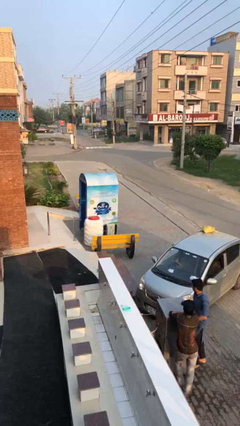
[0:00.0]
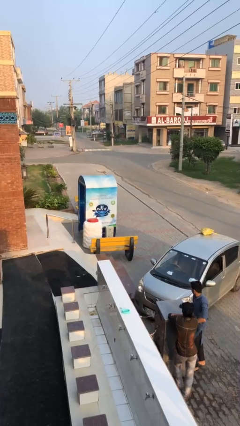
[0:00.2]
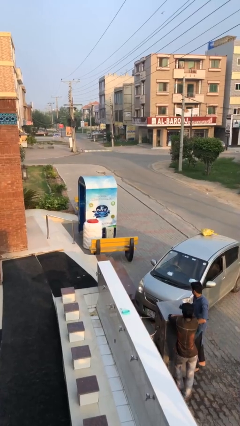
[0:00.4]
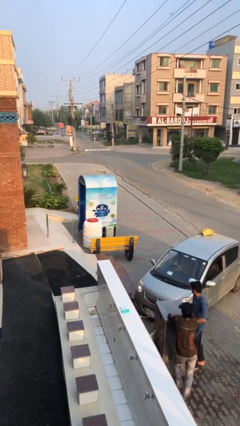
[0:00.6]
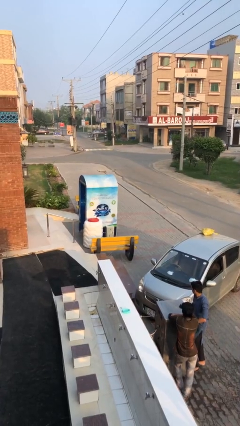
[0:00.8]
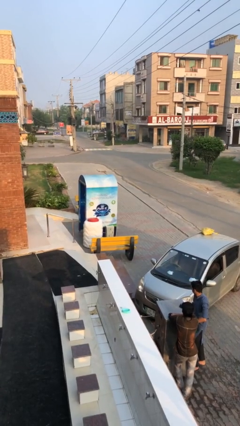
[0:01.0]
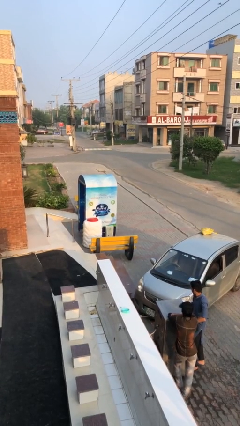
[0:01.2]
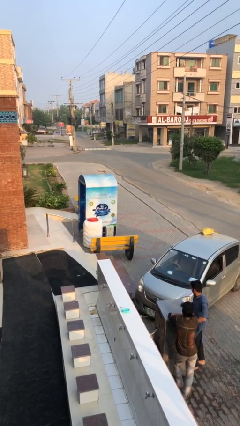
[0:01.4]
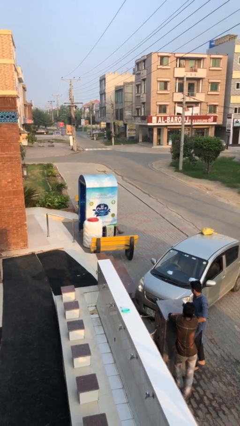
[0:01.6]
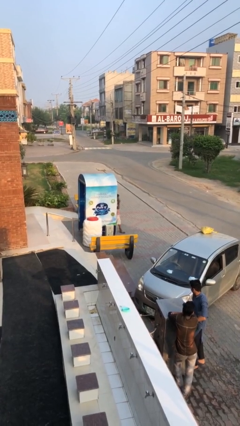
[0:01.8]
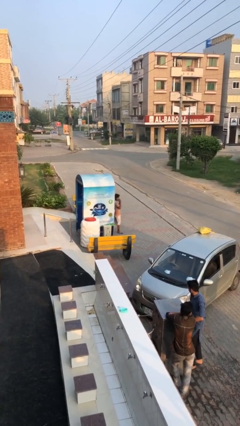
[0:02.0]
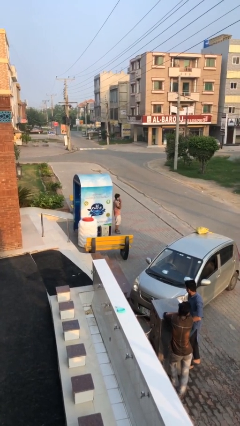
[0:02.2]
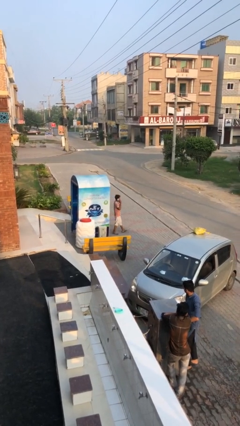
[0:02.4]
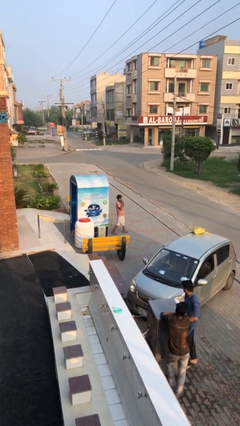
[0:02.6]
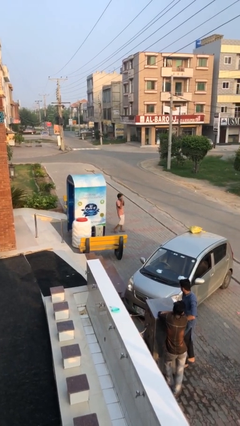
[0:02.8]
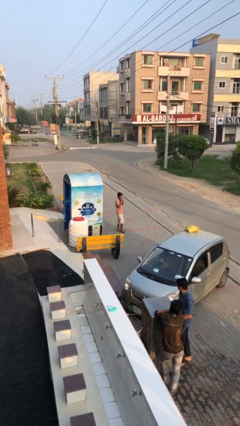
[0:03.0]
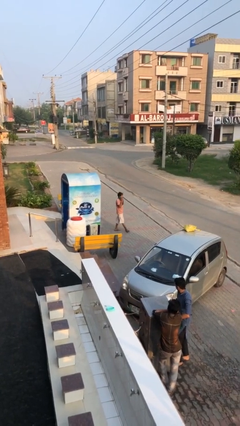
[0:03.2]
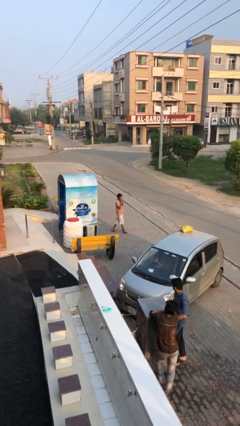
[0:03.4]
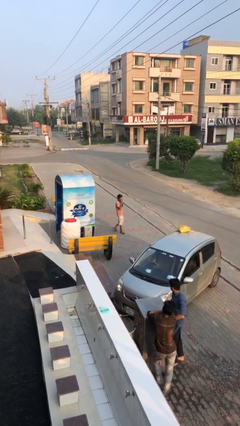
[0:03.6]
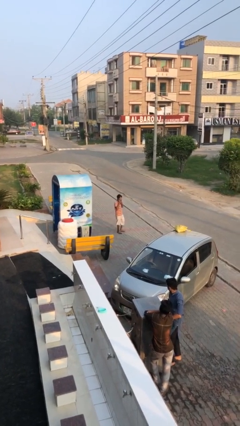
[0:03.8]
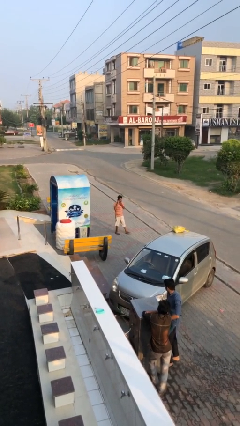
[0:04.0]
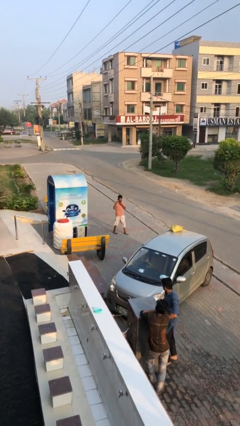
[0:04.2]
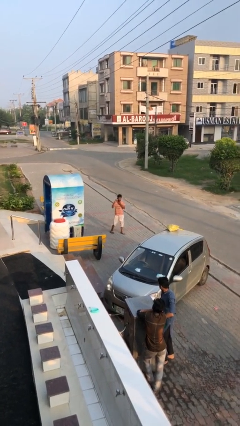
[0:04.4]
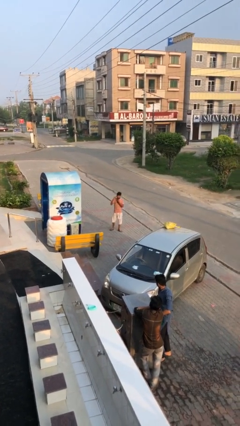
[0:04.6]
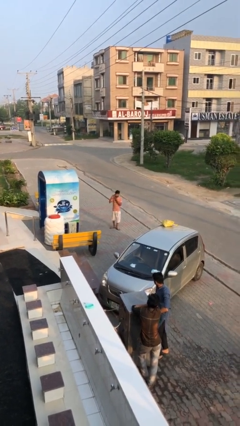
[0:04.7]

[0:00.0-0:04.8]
person enters scene through structure

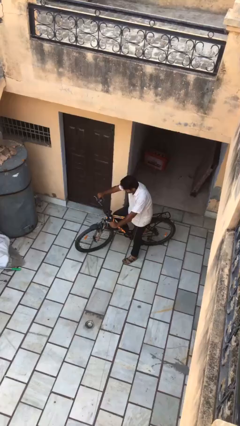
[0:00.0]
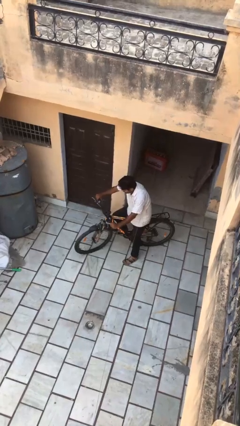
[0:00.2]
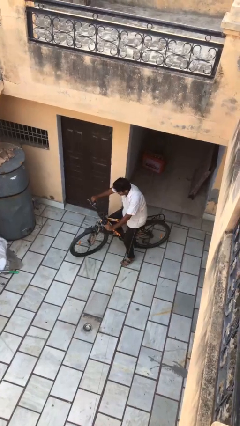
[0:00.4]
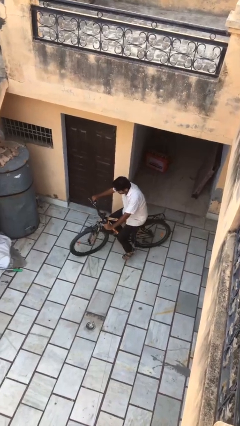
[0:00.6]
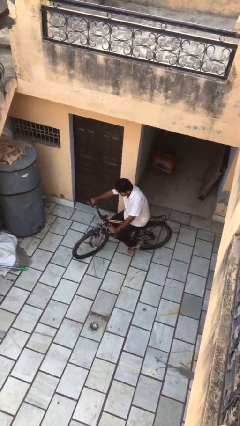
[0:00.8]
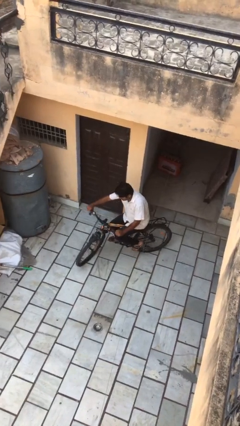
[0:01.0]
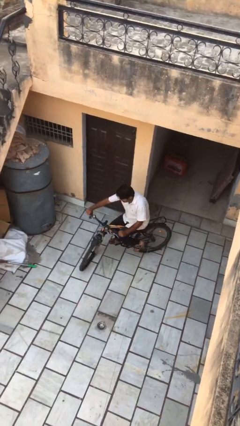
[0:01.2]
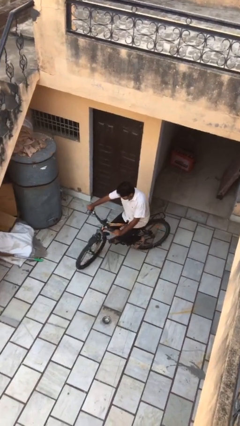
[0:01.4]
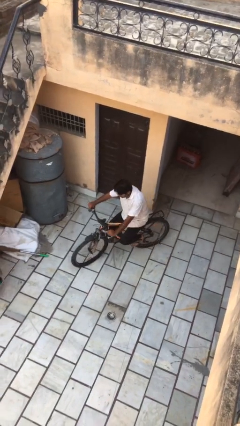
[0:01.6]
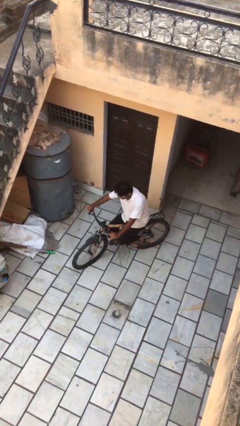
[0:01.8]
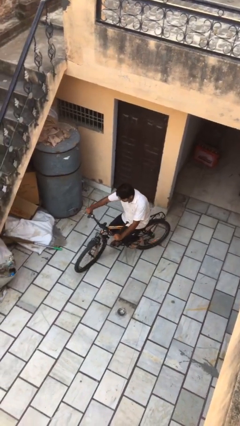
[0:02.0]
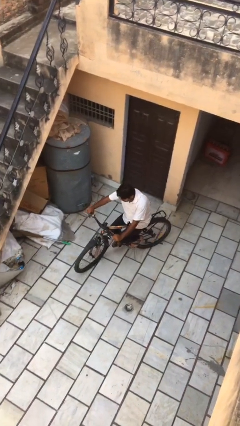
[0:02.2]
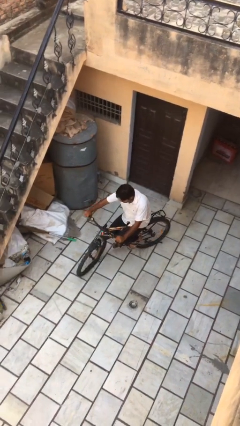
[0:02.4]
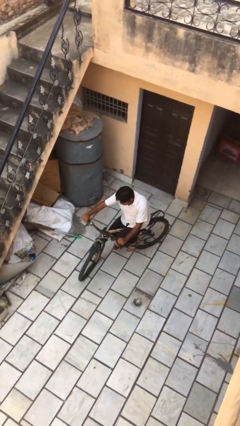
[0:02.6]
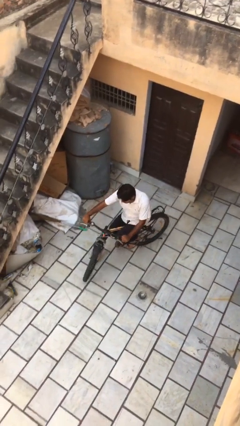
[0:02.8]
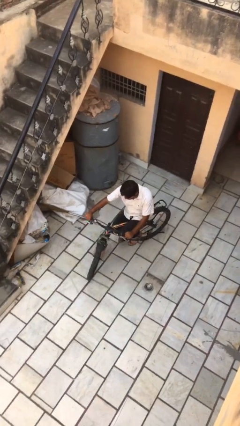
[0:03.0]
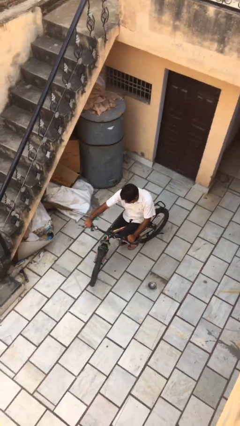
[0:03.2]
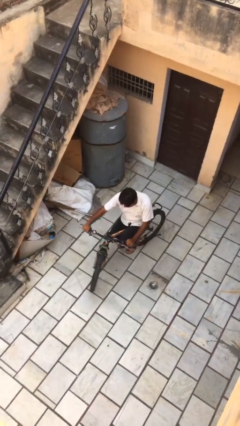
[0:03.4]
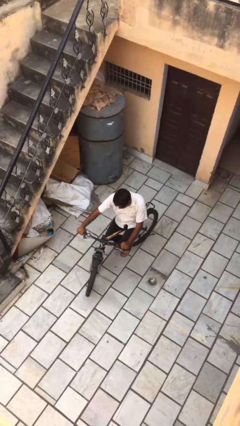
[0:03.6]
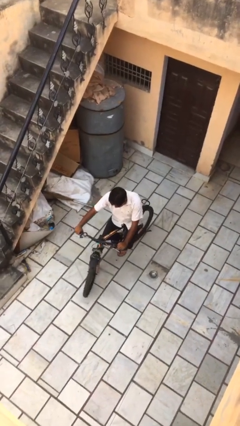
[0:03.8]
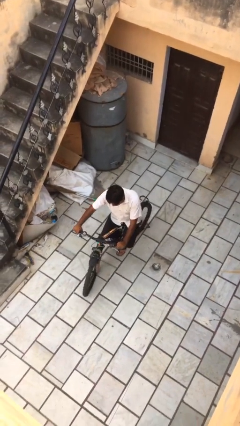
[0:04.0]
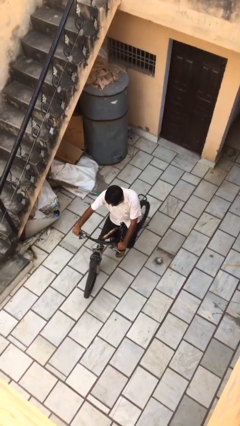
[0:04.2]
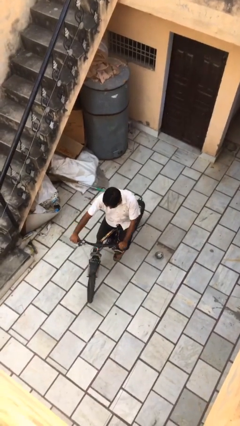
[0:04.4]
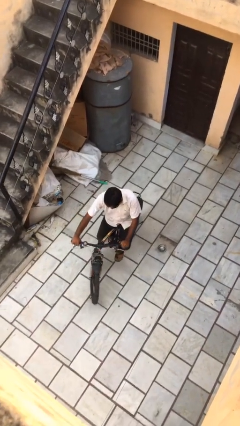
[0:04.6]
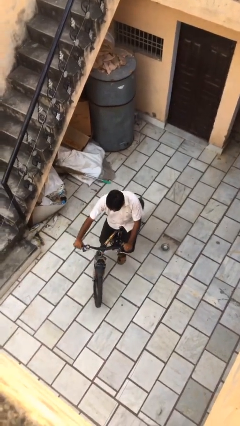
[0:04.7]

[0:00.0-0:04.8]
person rides bicycle

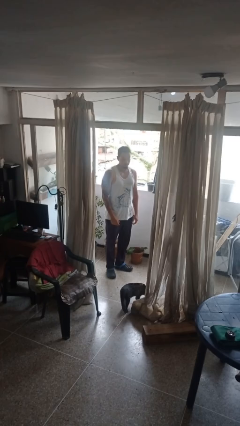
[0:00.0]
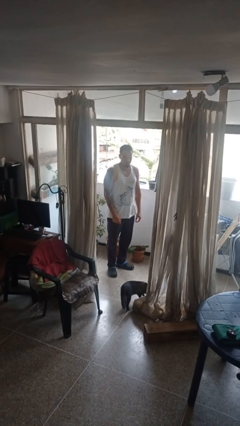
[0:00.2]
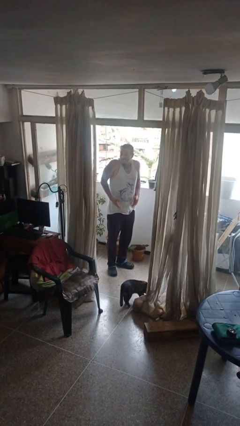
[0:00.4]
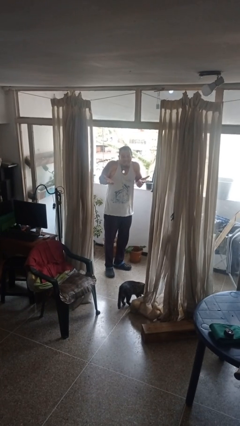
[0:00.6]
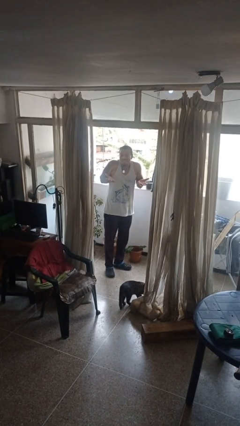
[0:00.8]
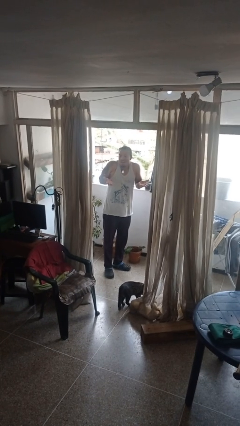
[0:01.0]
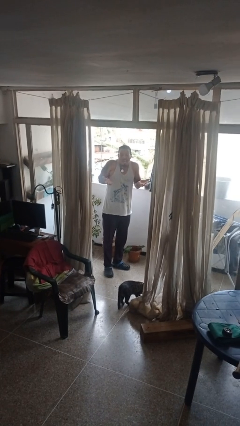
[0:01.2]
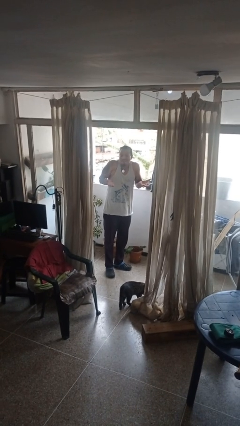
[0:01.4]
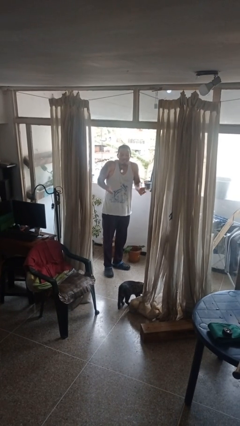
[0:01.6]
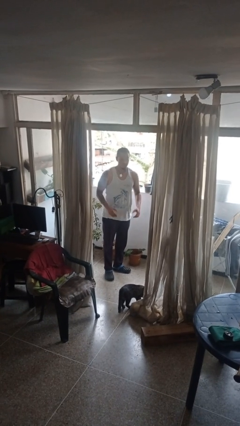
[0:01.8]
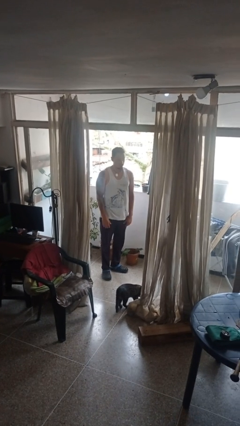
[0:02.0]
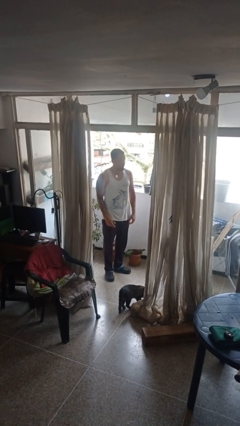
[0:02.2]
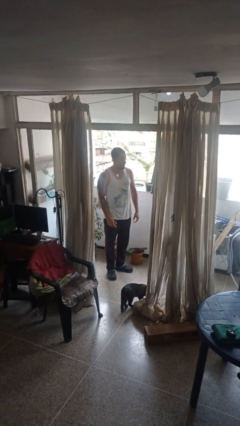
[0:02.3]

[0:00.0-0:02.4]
person shrugs

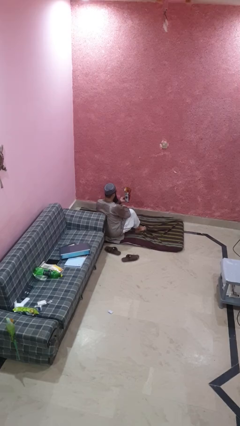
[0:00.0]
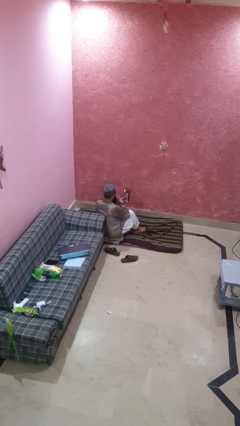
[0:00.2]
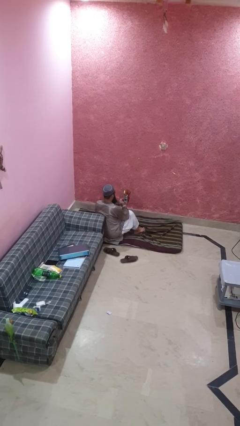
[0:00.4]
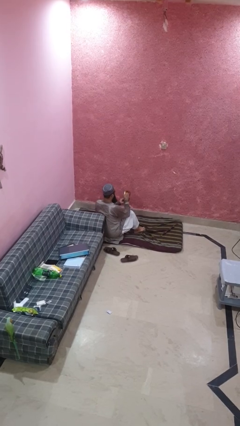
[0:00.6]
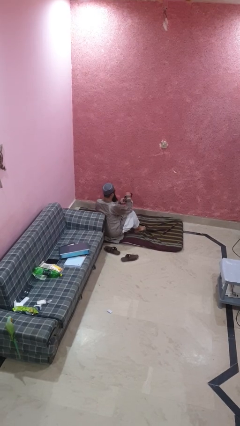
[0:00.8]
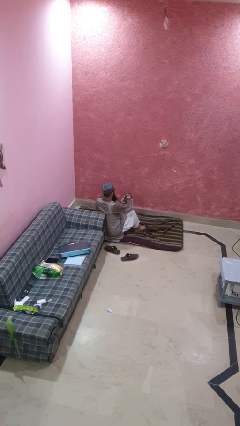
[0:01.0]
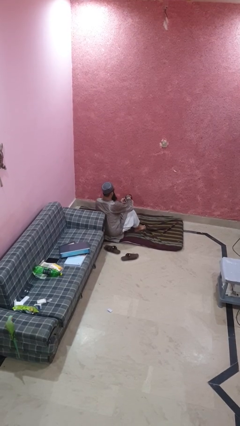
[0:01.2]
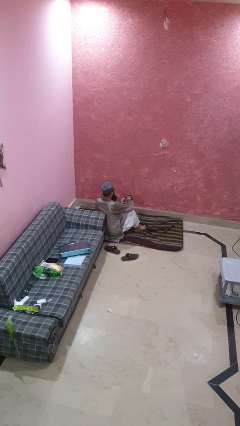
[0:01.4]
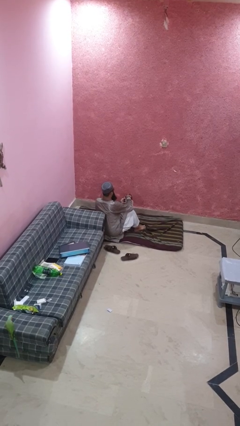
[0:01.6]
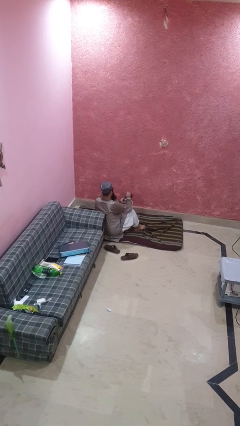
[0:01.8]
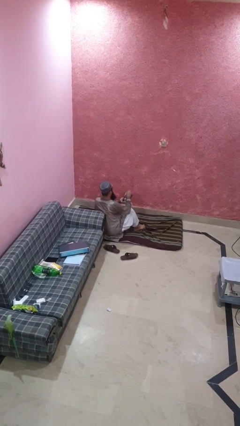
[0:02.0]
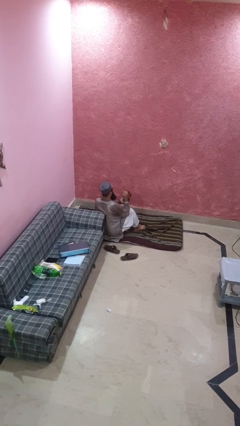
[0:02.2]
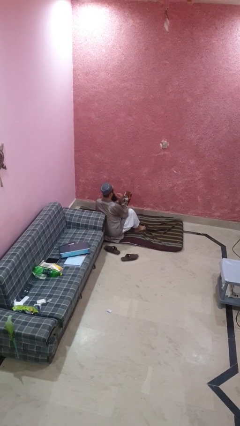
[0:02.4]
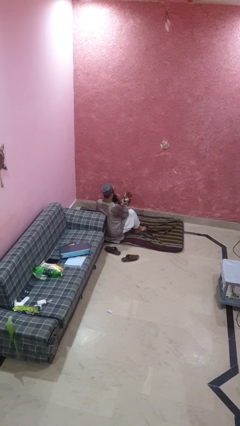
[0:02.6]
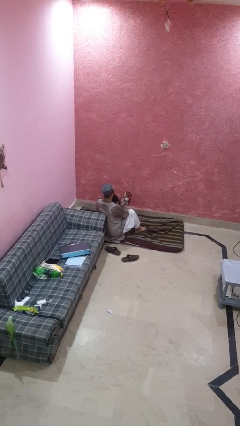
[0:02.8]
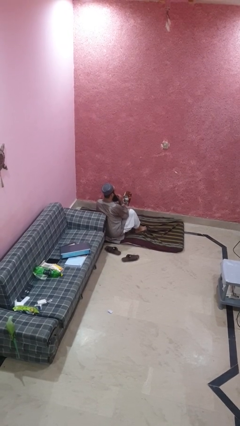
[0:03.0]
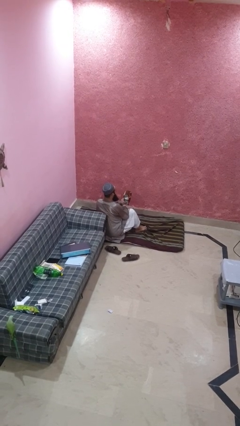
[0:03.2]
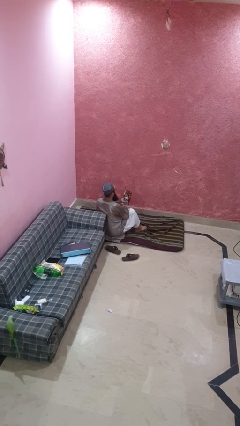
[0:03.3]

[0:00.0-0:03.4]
person eats snack from bag

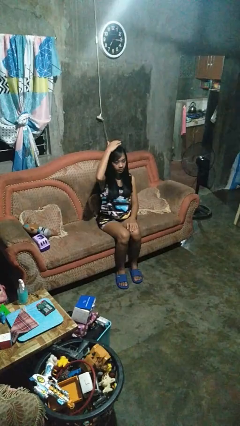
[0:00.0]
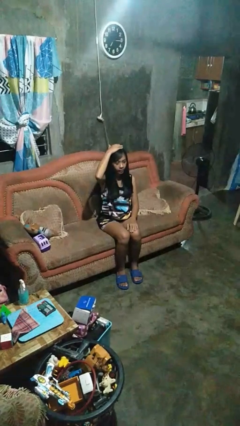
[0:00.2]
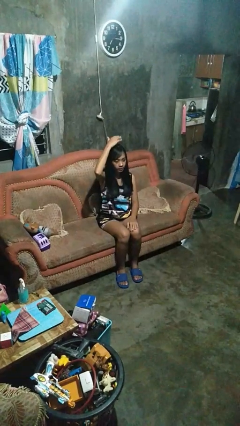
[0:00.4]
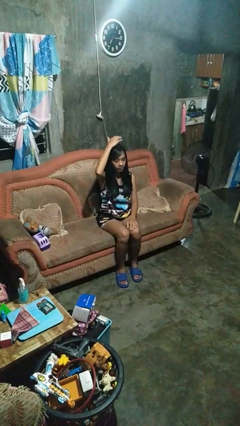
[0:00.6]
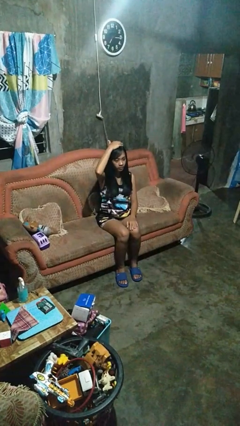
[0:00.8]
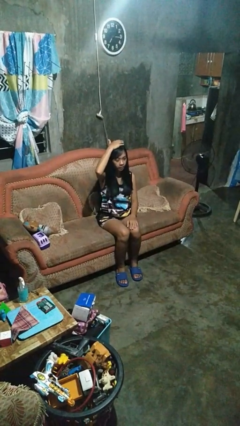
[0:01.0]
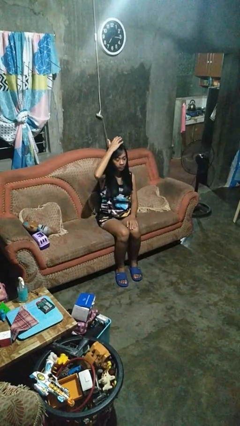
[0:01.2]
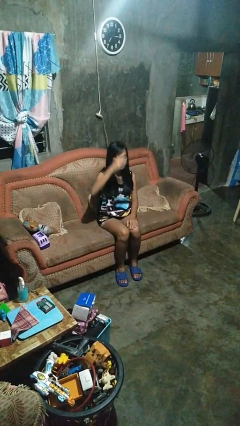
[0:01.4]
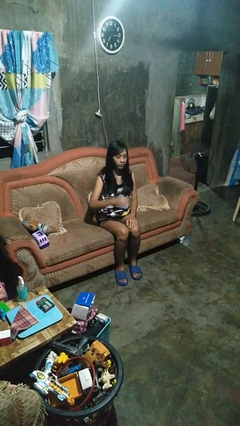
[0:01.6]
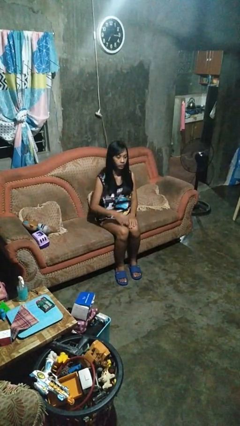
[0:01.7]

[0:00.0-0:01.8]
person pats head

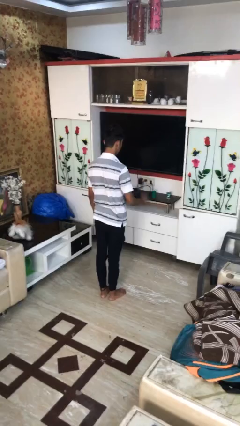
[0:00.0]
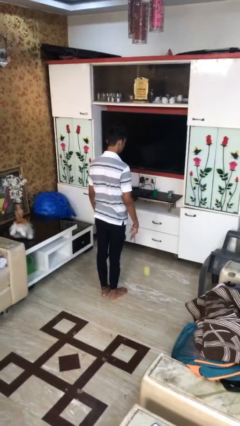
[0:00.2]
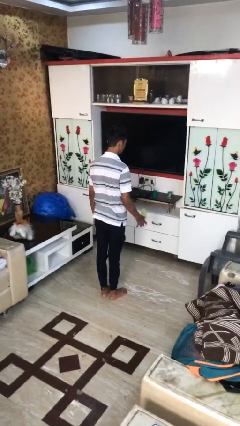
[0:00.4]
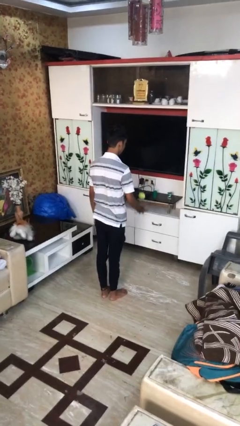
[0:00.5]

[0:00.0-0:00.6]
person bounces ball on floor
